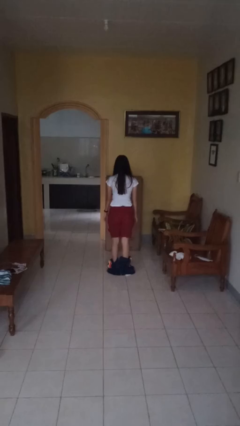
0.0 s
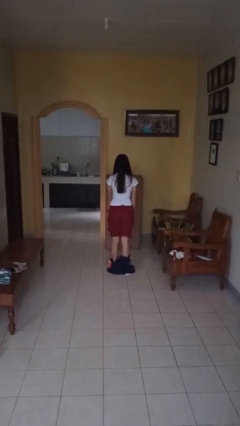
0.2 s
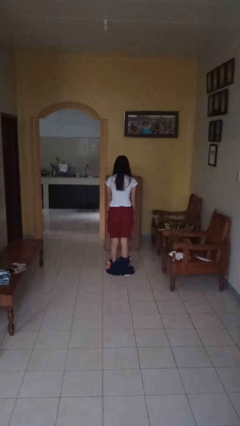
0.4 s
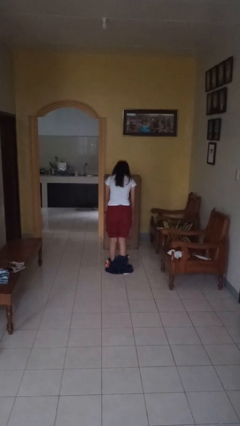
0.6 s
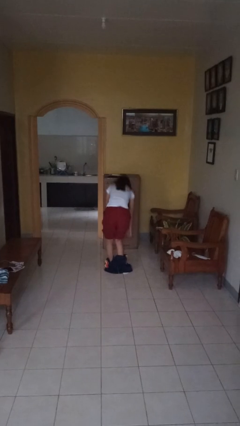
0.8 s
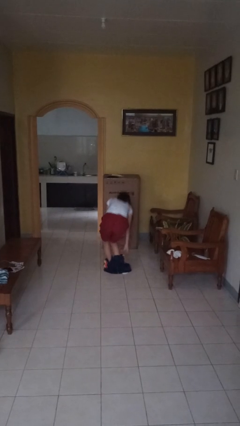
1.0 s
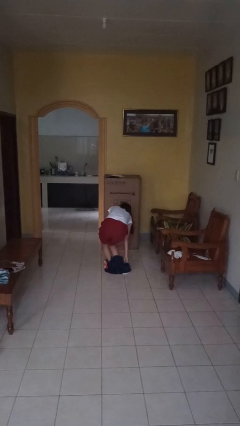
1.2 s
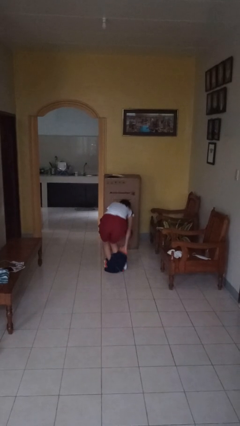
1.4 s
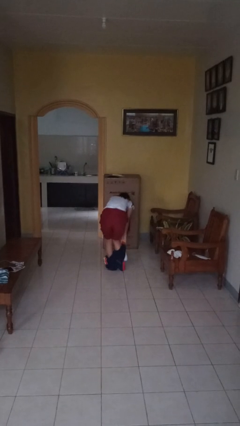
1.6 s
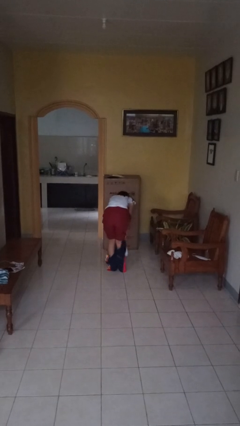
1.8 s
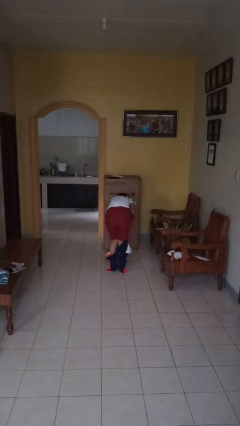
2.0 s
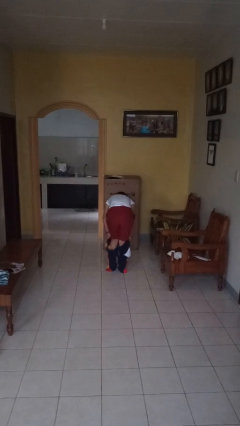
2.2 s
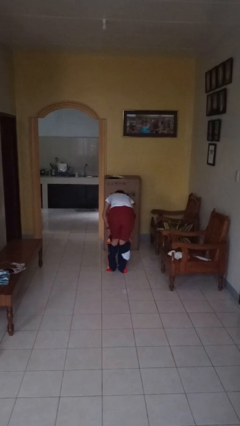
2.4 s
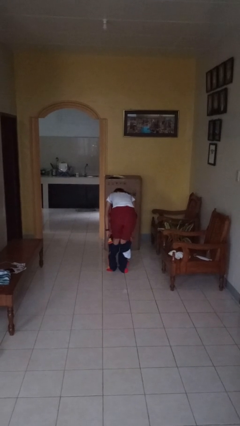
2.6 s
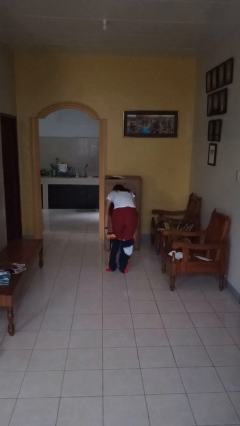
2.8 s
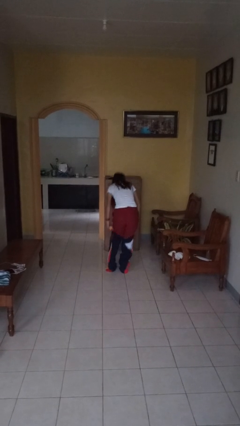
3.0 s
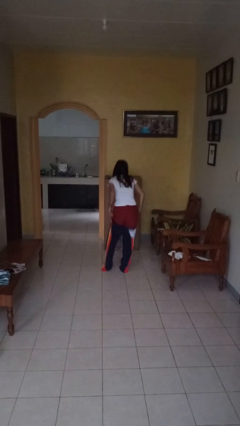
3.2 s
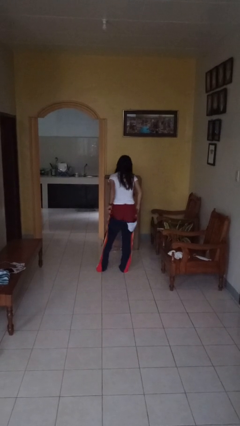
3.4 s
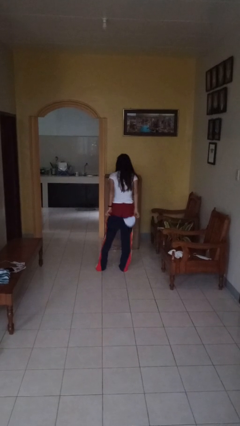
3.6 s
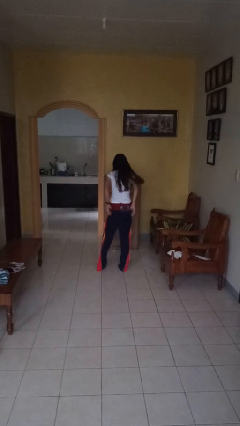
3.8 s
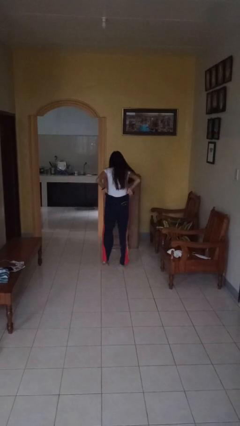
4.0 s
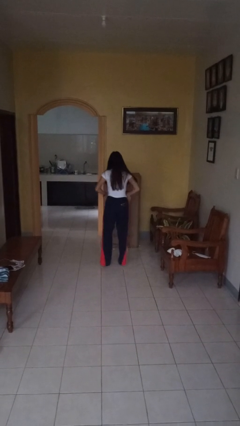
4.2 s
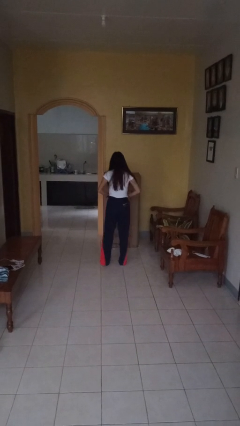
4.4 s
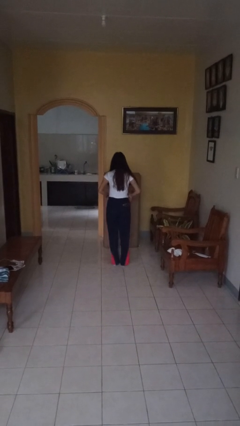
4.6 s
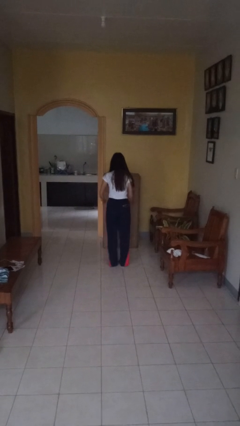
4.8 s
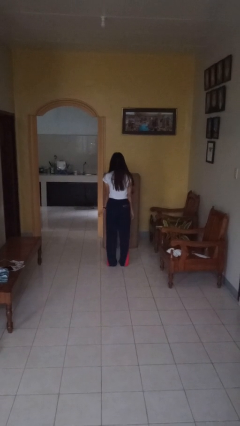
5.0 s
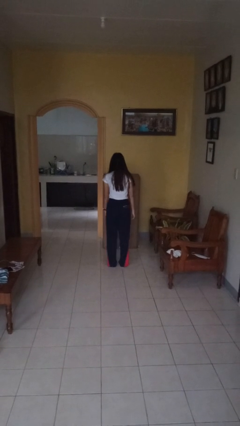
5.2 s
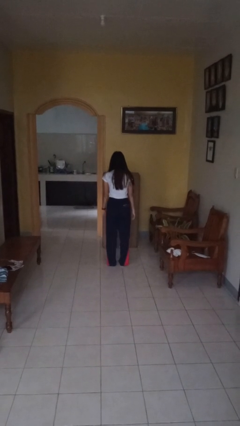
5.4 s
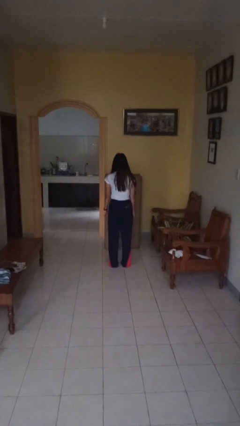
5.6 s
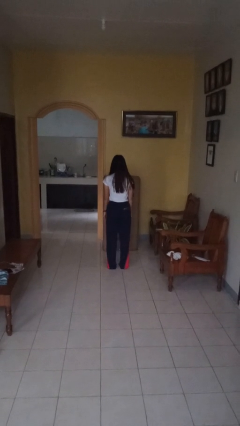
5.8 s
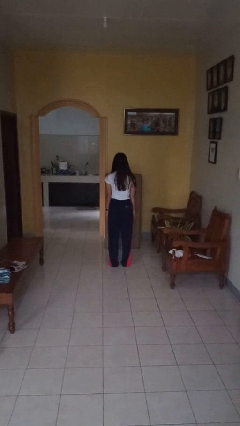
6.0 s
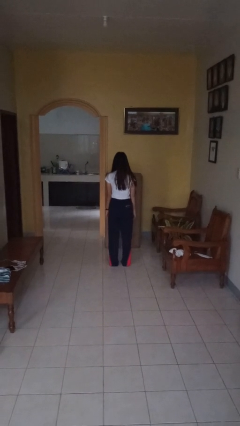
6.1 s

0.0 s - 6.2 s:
person puts on pants

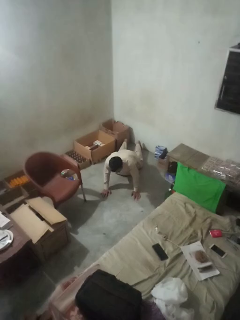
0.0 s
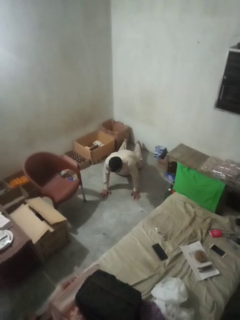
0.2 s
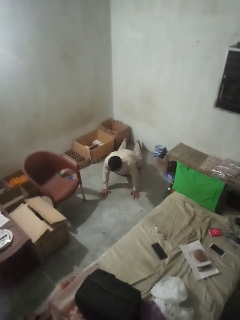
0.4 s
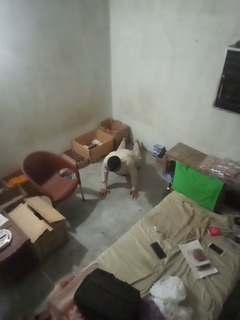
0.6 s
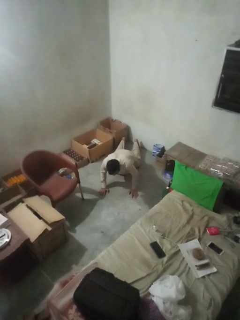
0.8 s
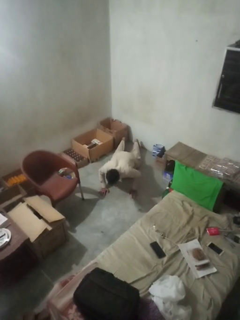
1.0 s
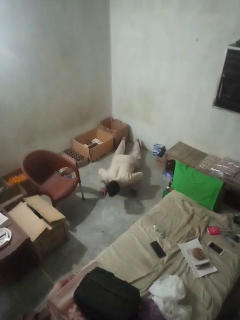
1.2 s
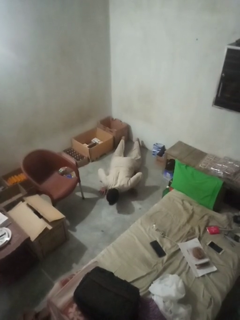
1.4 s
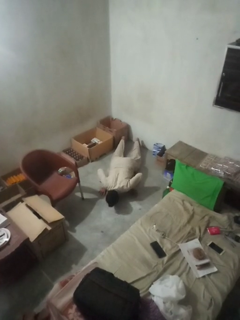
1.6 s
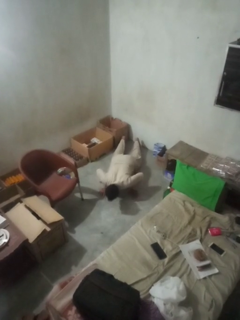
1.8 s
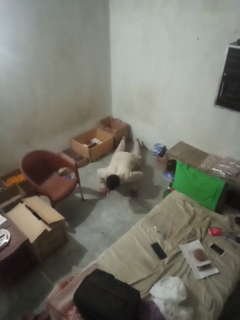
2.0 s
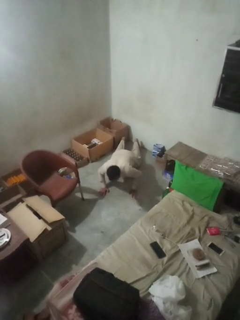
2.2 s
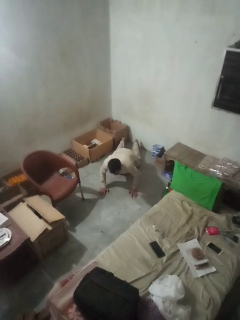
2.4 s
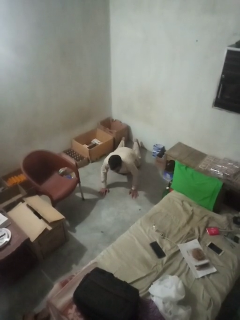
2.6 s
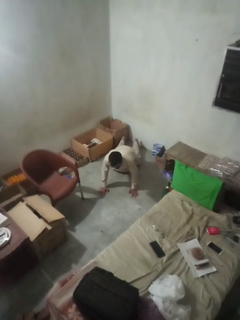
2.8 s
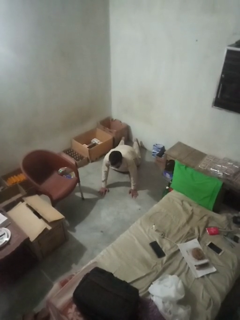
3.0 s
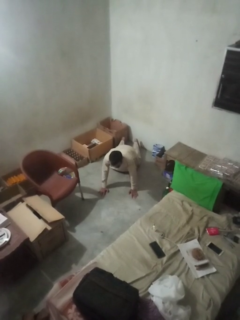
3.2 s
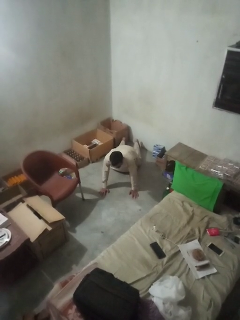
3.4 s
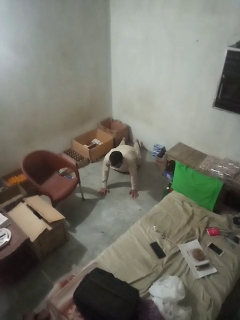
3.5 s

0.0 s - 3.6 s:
person exercises with pushup

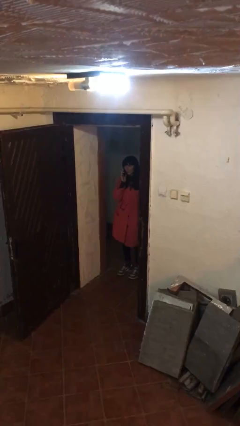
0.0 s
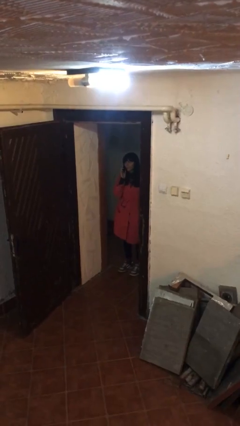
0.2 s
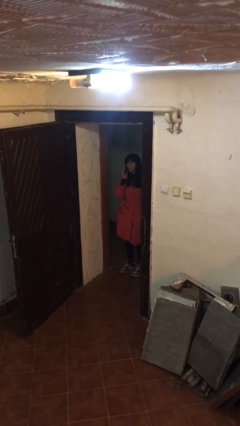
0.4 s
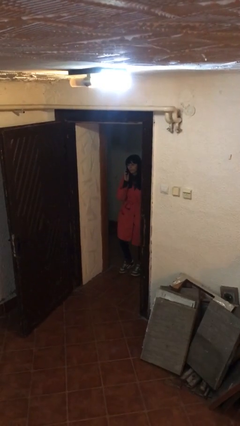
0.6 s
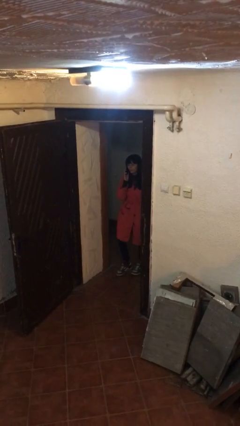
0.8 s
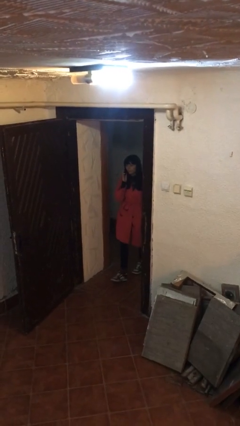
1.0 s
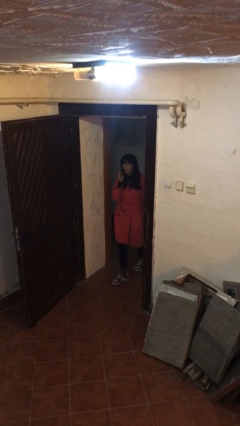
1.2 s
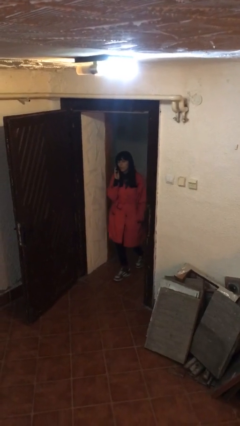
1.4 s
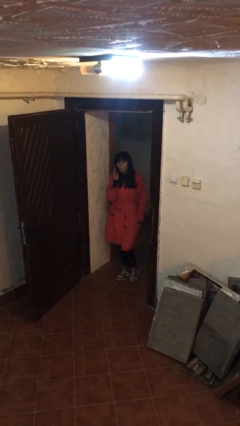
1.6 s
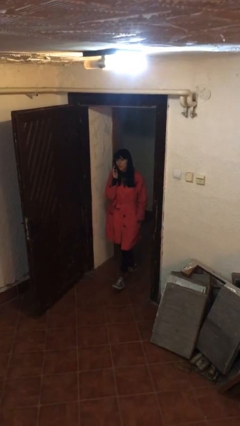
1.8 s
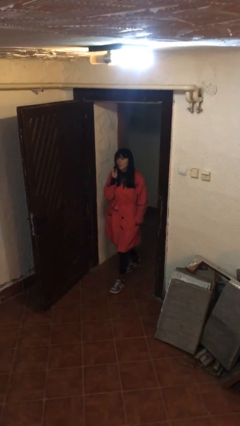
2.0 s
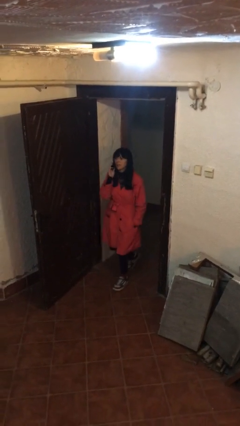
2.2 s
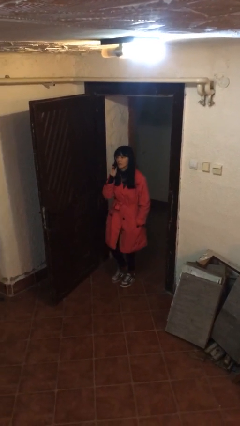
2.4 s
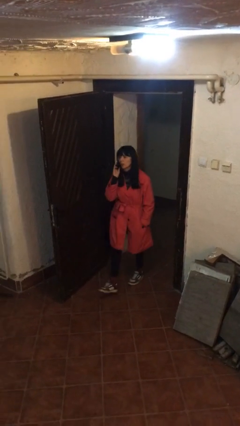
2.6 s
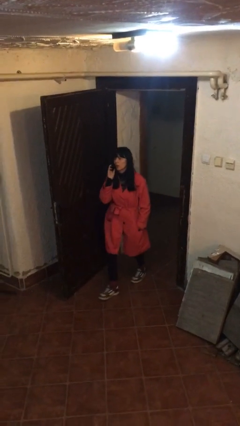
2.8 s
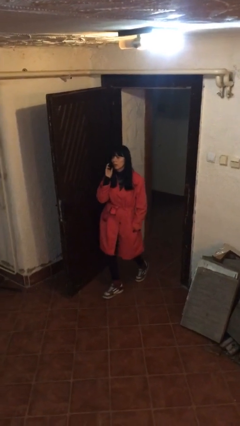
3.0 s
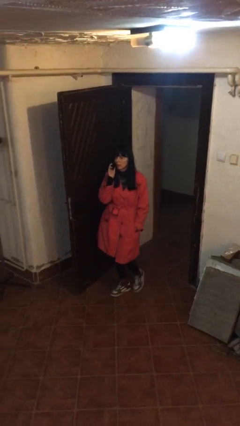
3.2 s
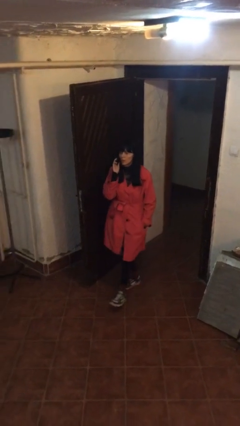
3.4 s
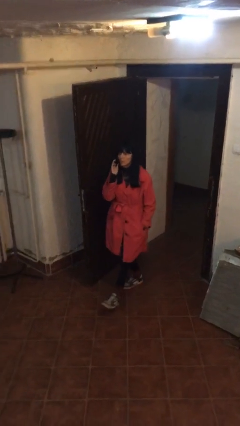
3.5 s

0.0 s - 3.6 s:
person enters scene through structure

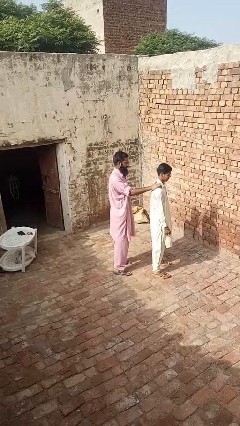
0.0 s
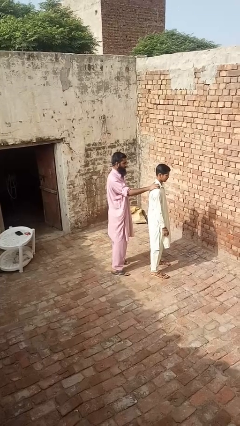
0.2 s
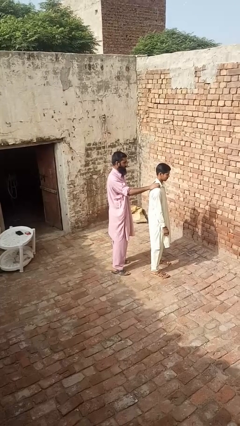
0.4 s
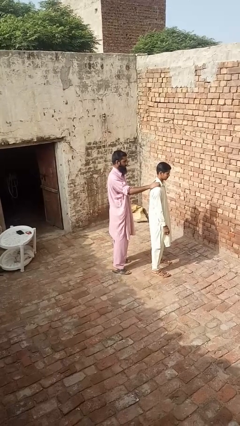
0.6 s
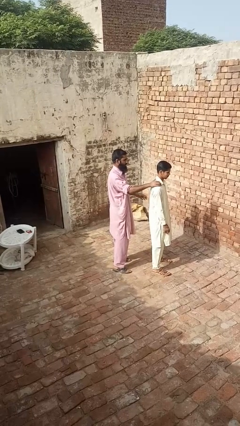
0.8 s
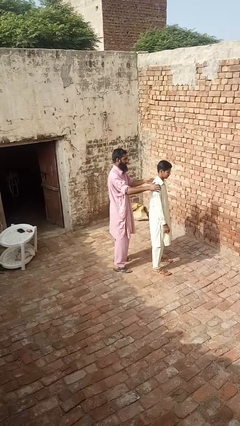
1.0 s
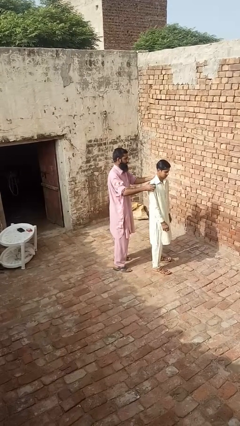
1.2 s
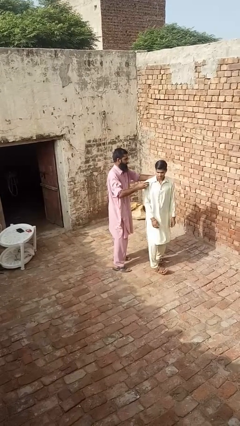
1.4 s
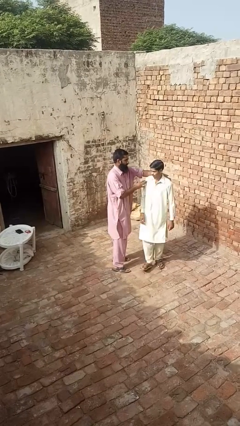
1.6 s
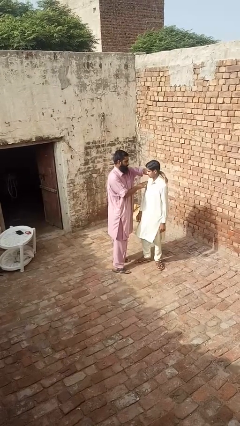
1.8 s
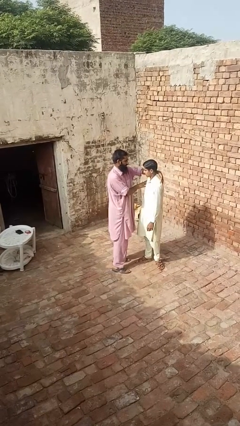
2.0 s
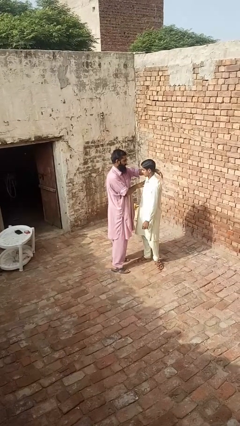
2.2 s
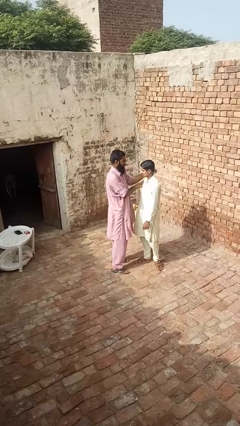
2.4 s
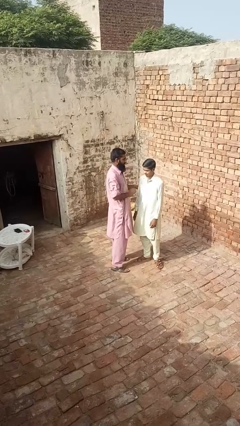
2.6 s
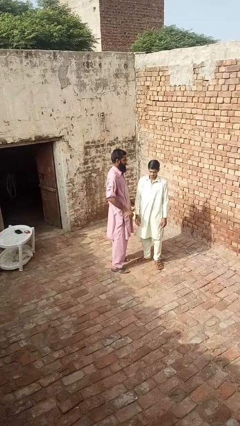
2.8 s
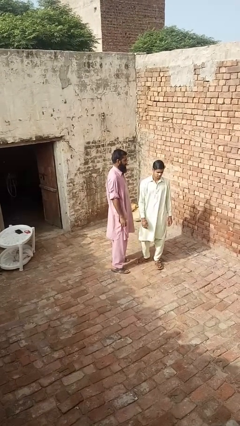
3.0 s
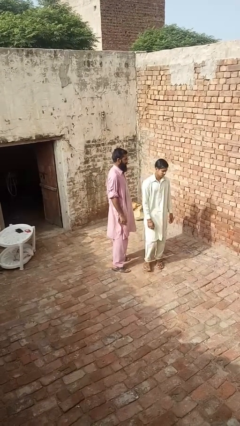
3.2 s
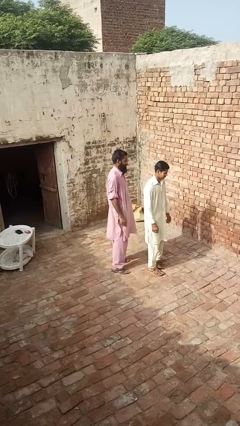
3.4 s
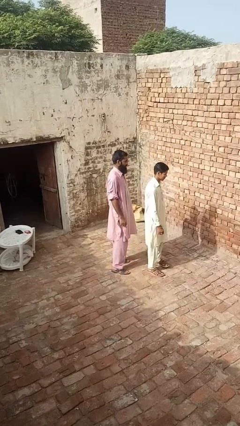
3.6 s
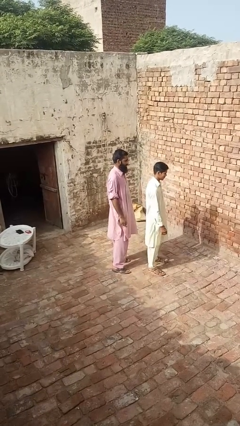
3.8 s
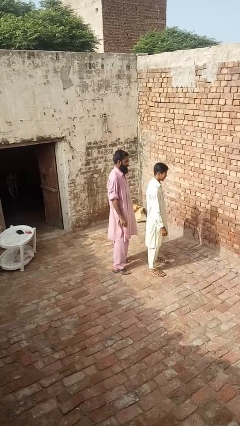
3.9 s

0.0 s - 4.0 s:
person spins person around

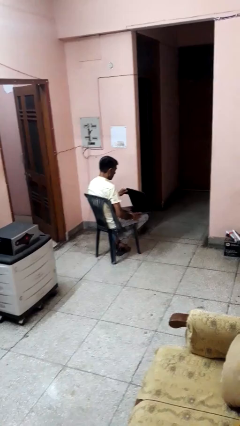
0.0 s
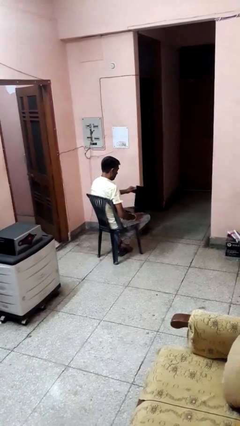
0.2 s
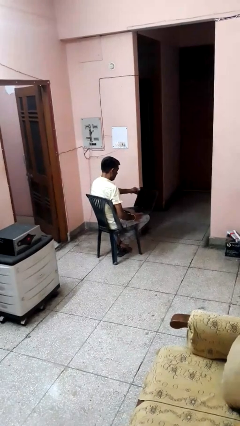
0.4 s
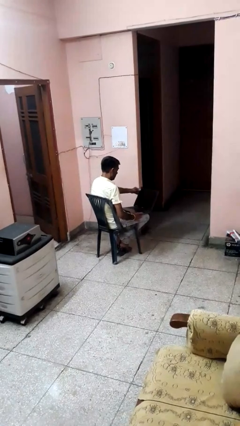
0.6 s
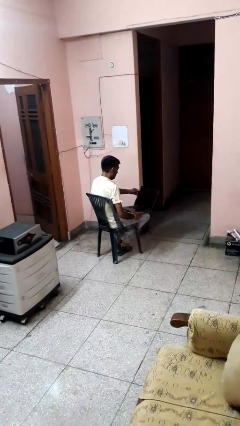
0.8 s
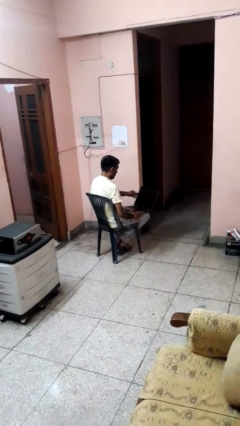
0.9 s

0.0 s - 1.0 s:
person opens laptop

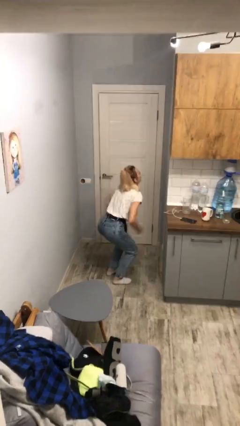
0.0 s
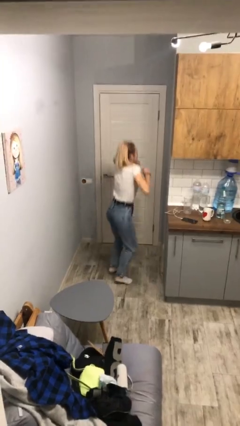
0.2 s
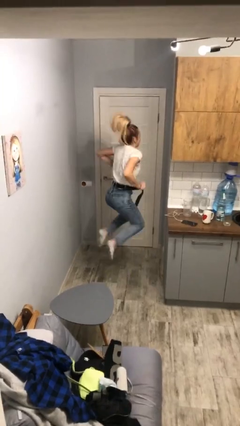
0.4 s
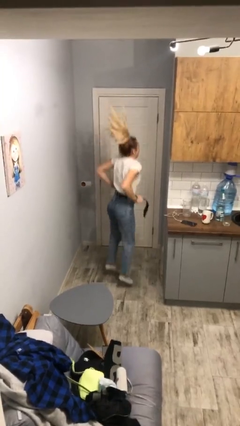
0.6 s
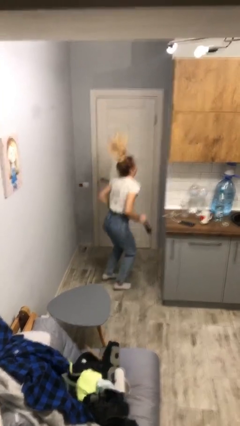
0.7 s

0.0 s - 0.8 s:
person jumps
